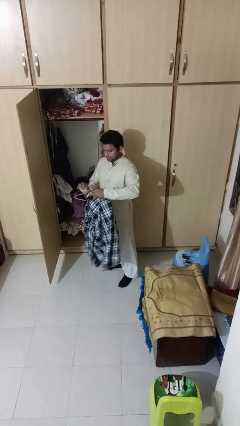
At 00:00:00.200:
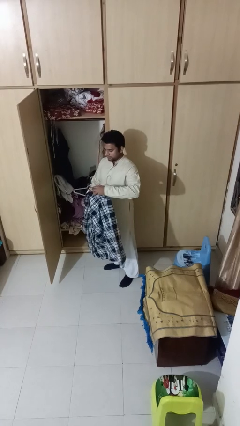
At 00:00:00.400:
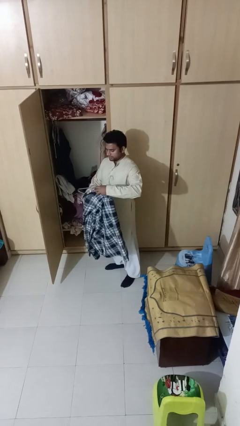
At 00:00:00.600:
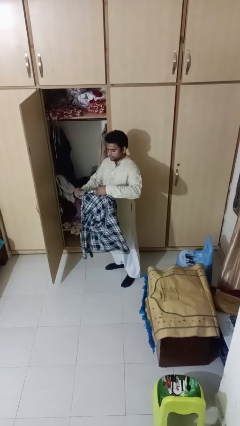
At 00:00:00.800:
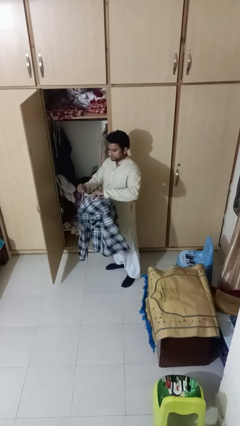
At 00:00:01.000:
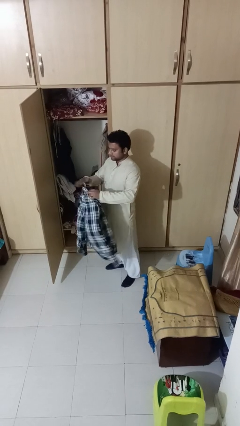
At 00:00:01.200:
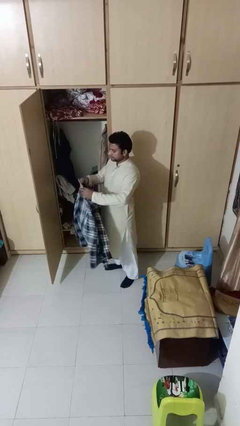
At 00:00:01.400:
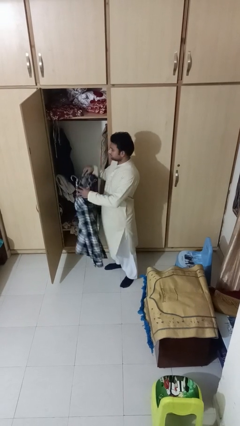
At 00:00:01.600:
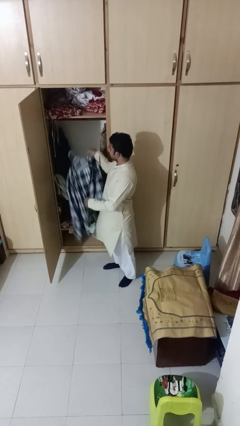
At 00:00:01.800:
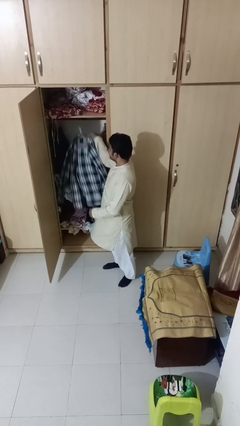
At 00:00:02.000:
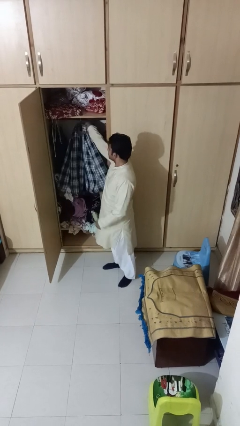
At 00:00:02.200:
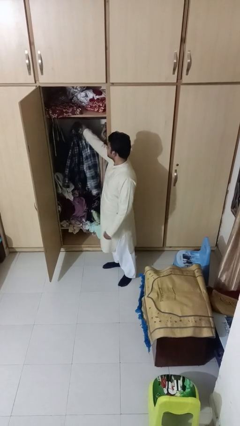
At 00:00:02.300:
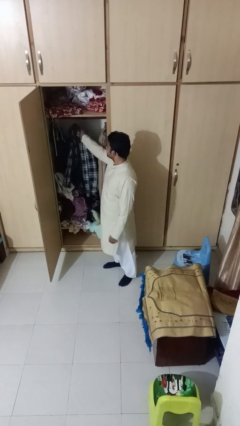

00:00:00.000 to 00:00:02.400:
person puts clothes into closet

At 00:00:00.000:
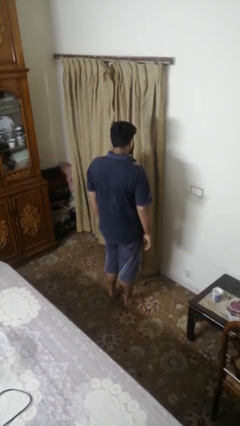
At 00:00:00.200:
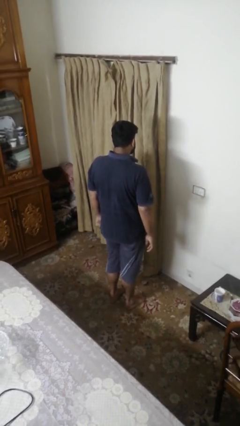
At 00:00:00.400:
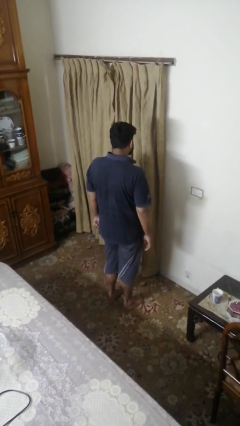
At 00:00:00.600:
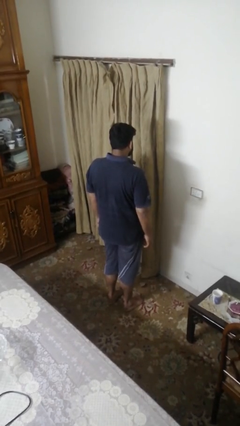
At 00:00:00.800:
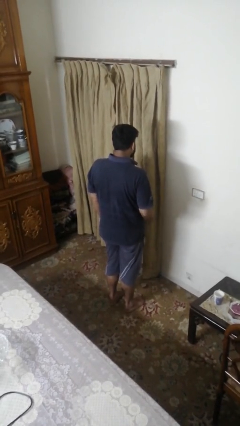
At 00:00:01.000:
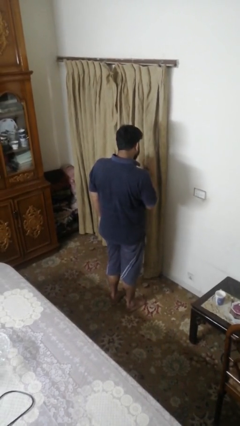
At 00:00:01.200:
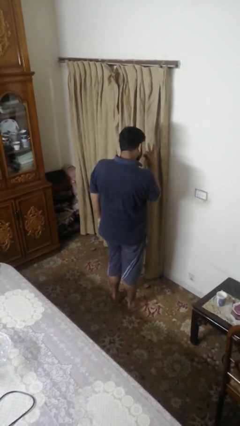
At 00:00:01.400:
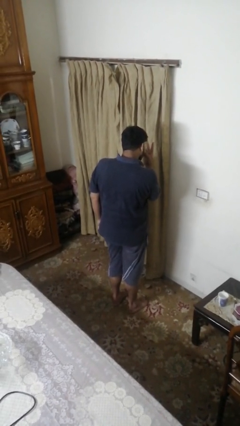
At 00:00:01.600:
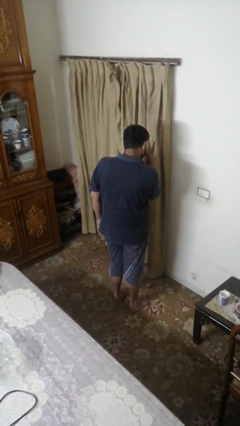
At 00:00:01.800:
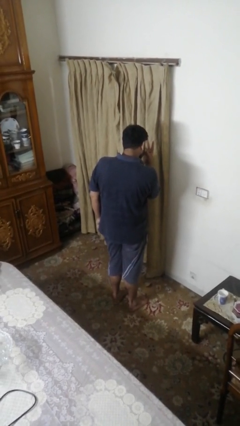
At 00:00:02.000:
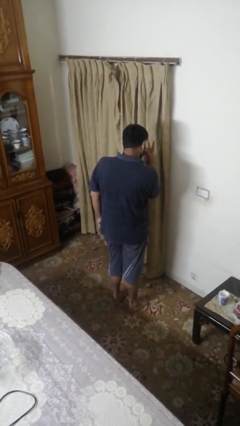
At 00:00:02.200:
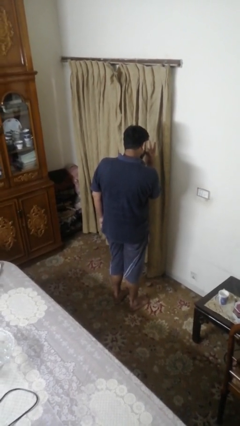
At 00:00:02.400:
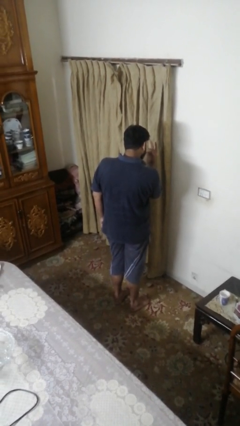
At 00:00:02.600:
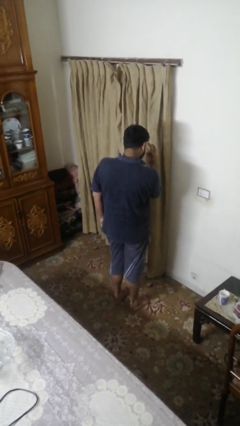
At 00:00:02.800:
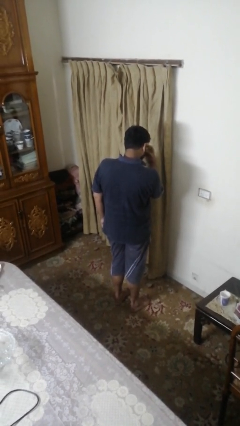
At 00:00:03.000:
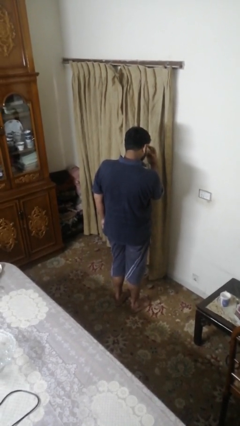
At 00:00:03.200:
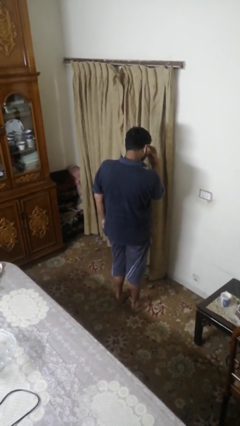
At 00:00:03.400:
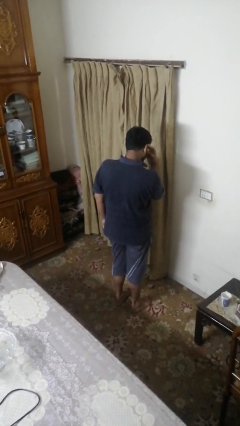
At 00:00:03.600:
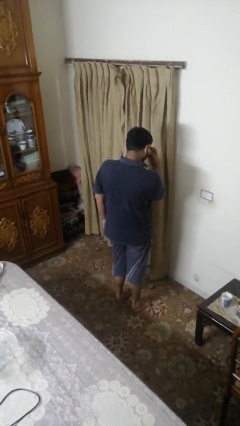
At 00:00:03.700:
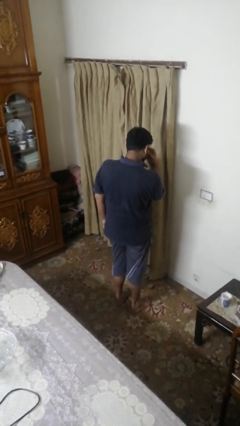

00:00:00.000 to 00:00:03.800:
person gestures watch closely

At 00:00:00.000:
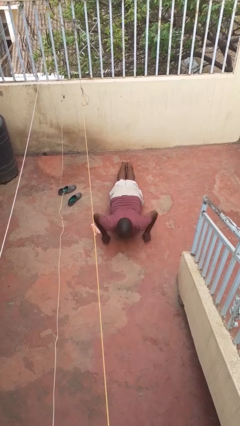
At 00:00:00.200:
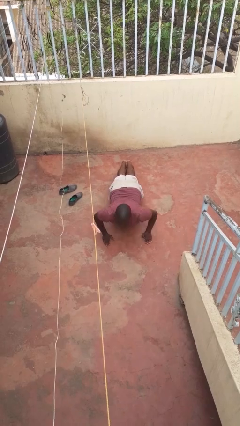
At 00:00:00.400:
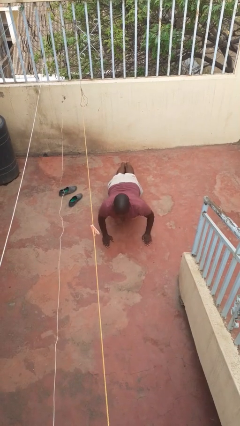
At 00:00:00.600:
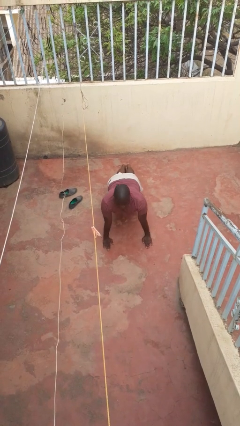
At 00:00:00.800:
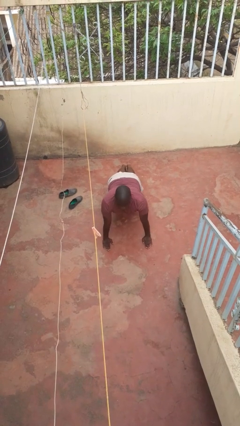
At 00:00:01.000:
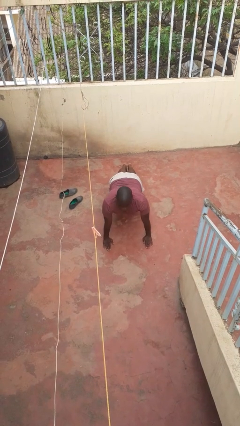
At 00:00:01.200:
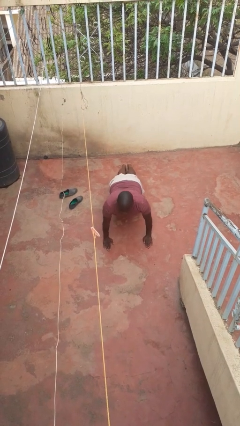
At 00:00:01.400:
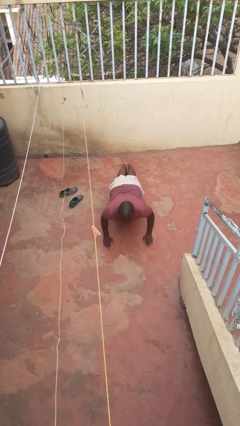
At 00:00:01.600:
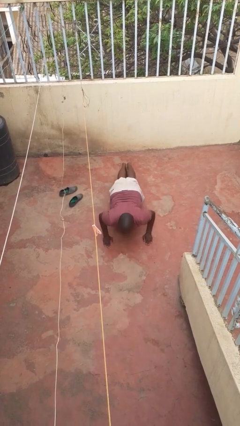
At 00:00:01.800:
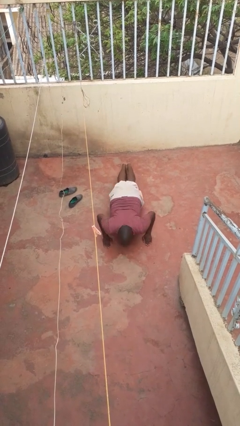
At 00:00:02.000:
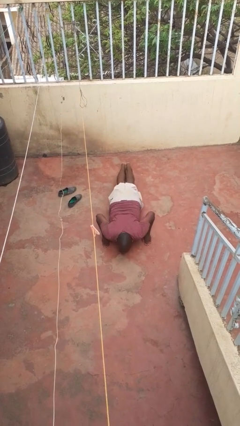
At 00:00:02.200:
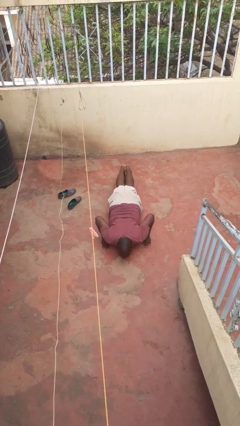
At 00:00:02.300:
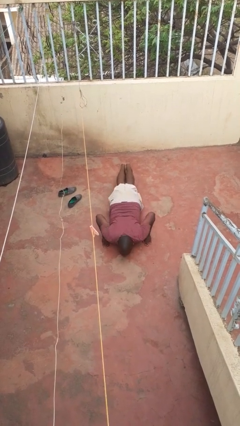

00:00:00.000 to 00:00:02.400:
person exercises with pushup

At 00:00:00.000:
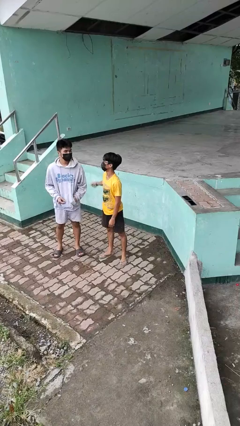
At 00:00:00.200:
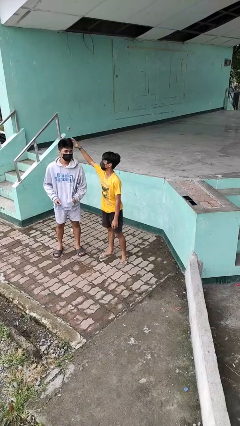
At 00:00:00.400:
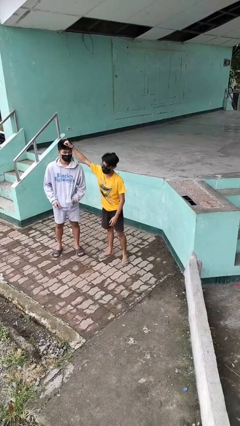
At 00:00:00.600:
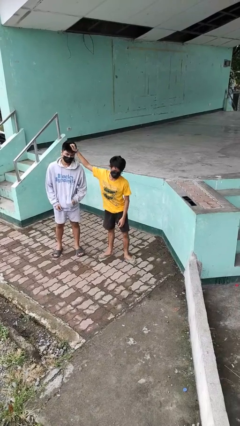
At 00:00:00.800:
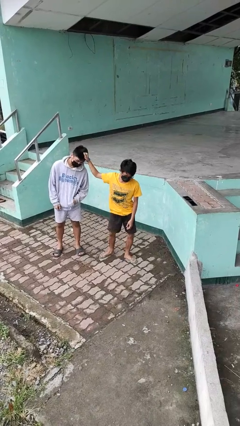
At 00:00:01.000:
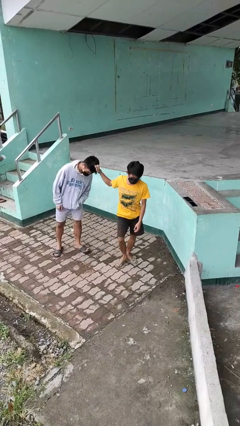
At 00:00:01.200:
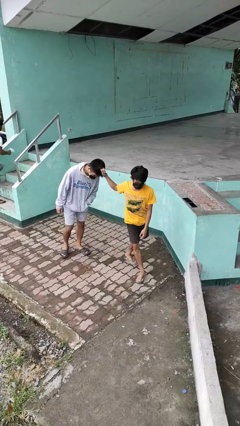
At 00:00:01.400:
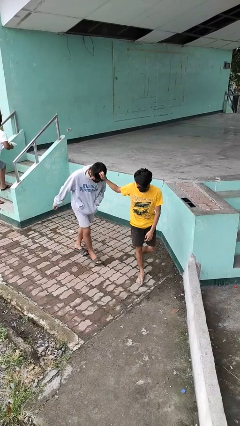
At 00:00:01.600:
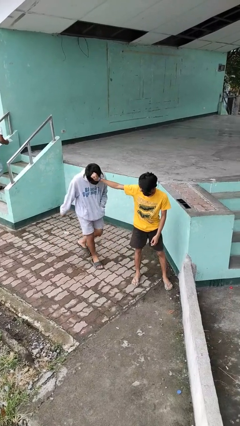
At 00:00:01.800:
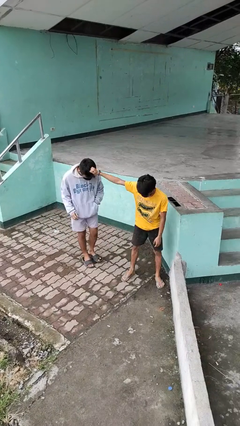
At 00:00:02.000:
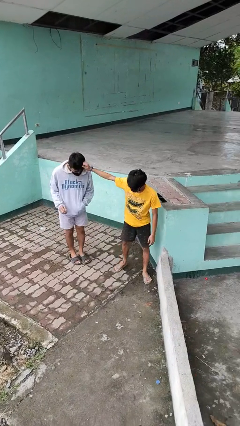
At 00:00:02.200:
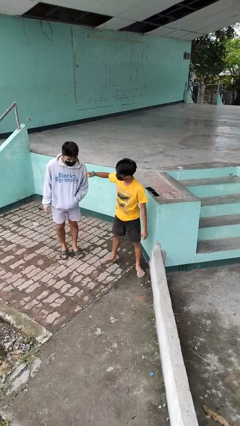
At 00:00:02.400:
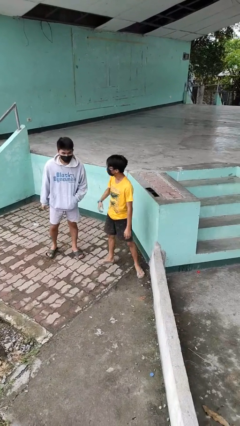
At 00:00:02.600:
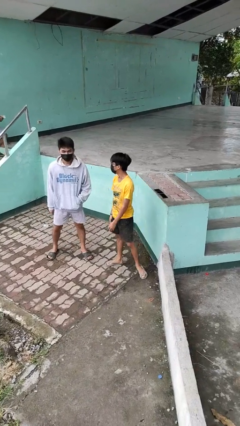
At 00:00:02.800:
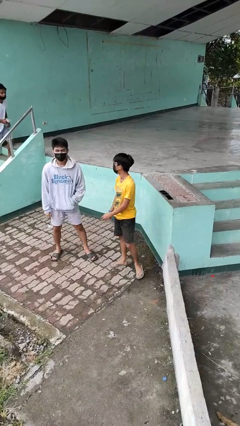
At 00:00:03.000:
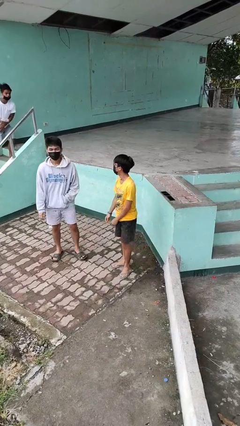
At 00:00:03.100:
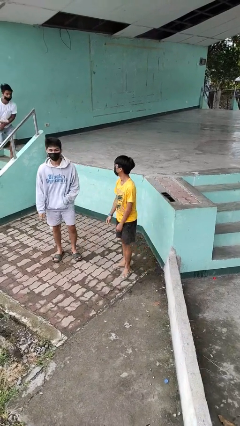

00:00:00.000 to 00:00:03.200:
person grabs person by hair

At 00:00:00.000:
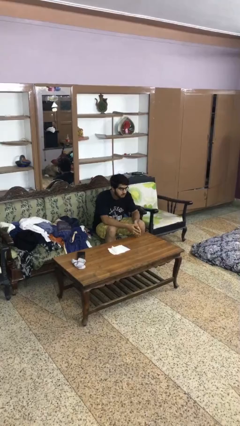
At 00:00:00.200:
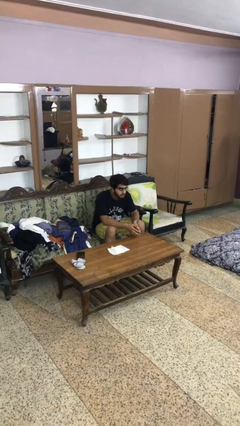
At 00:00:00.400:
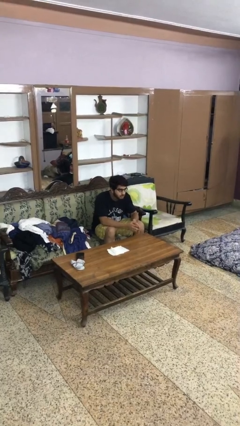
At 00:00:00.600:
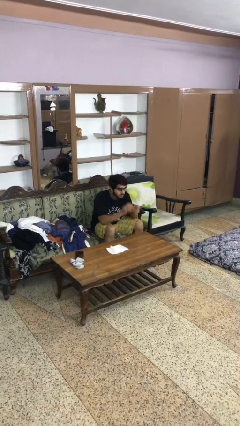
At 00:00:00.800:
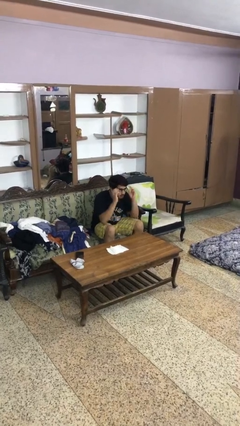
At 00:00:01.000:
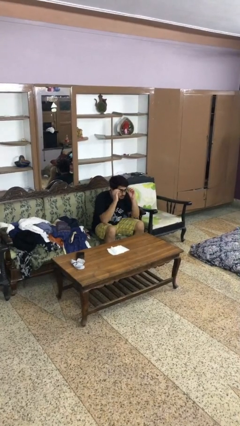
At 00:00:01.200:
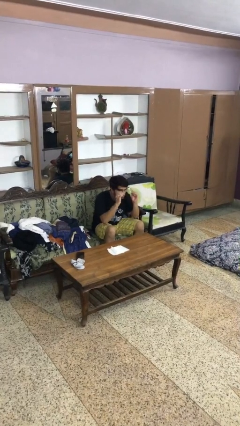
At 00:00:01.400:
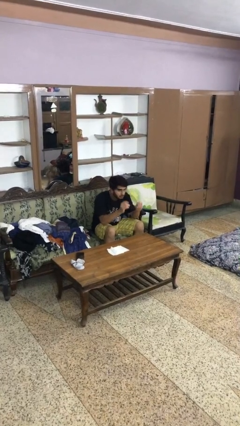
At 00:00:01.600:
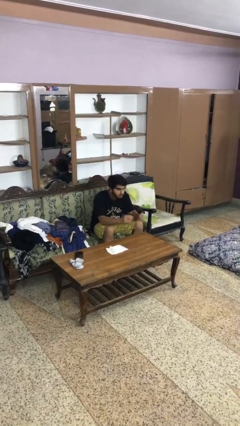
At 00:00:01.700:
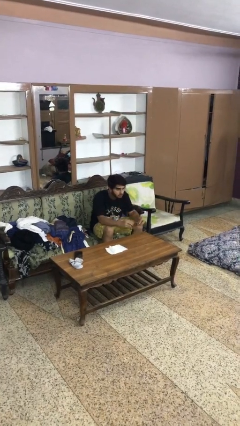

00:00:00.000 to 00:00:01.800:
person takes off glasses

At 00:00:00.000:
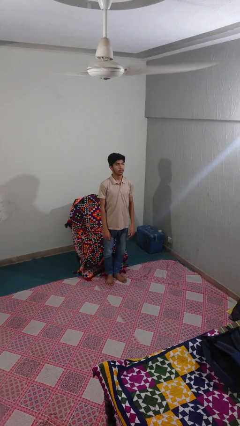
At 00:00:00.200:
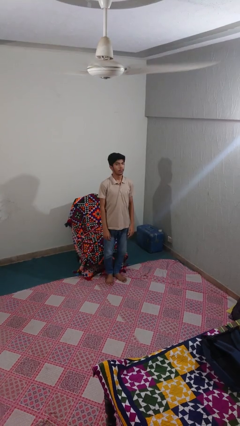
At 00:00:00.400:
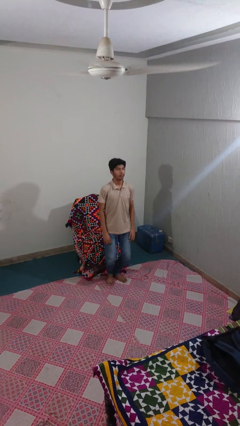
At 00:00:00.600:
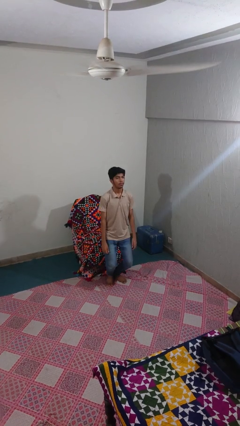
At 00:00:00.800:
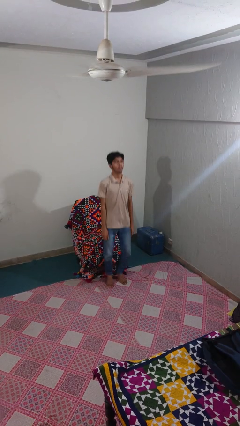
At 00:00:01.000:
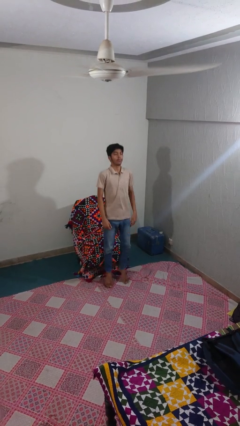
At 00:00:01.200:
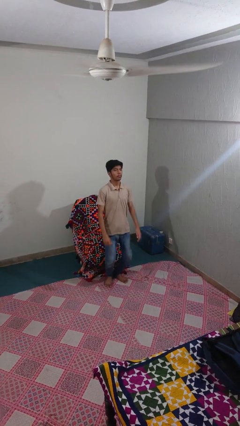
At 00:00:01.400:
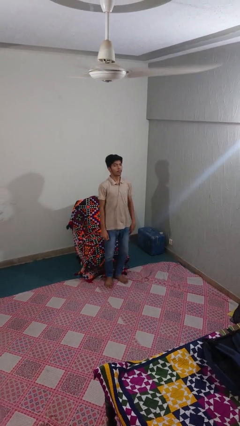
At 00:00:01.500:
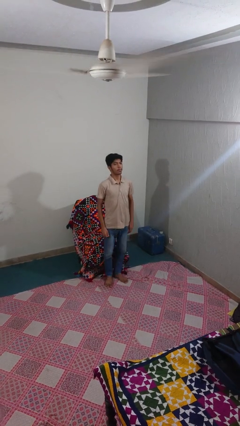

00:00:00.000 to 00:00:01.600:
person jumps

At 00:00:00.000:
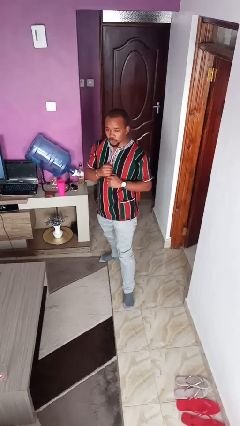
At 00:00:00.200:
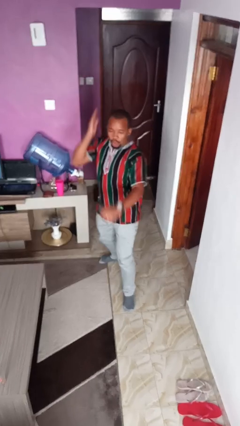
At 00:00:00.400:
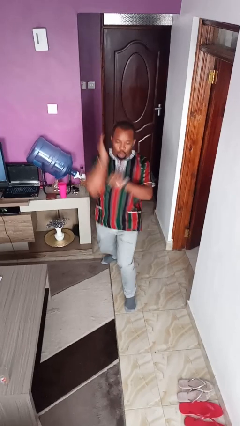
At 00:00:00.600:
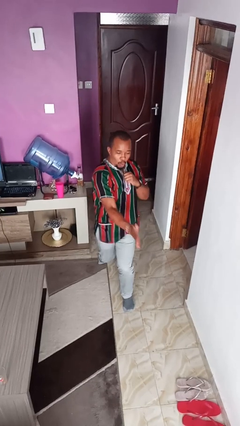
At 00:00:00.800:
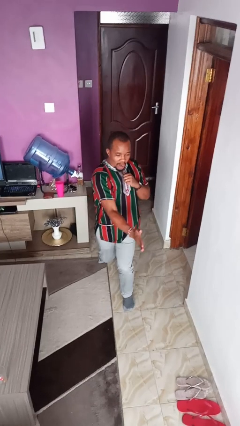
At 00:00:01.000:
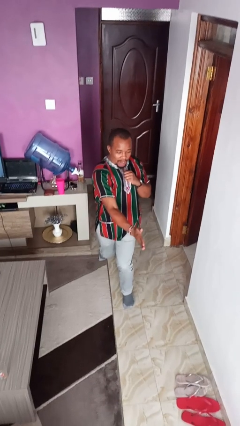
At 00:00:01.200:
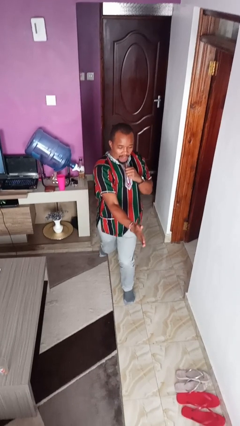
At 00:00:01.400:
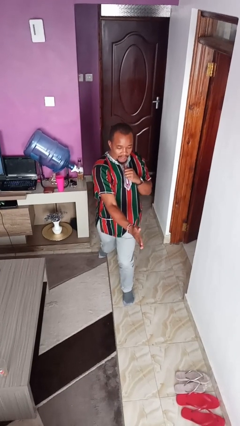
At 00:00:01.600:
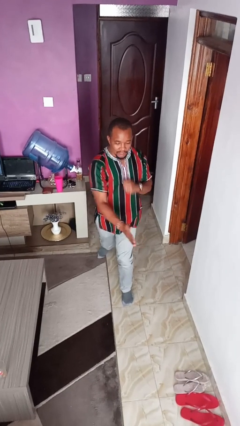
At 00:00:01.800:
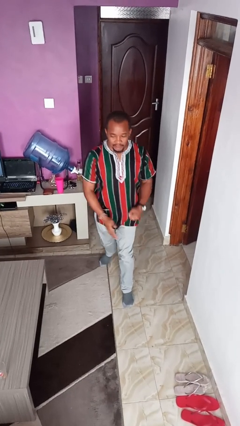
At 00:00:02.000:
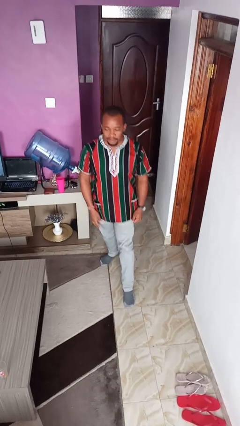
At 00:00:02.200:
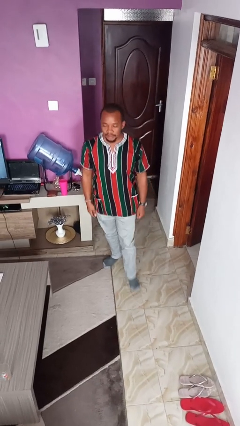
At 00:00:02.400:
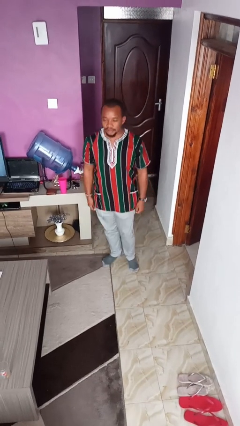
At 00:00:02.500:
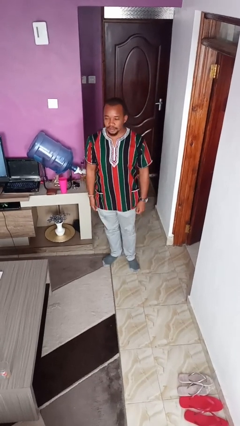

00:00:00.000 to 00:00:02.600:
person karate chop
